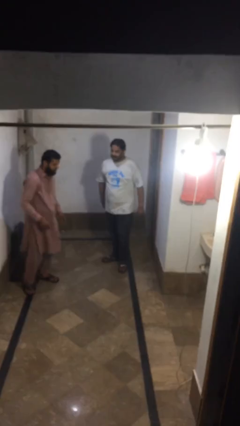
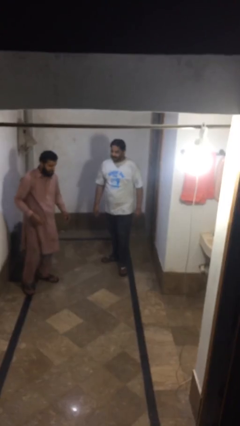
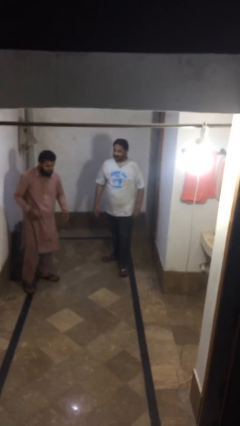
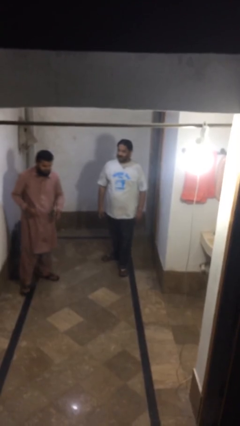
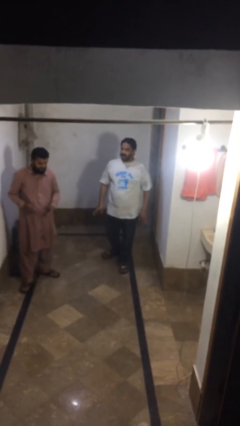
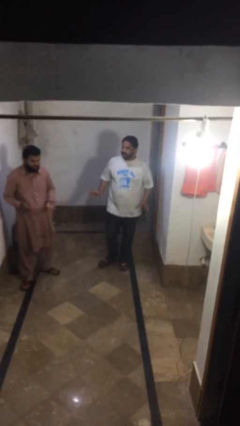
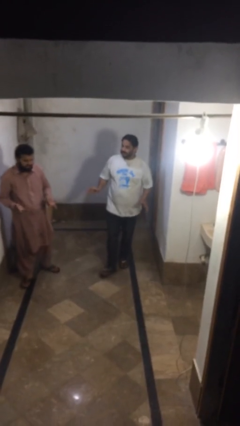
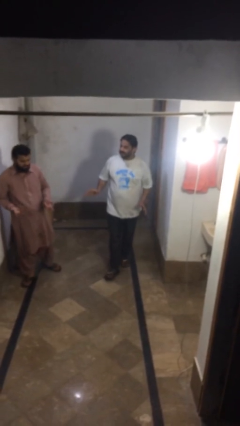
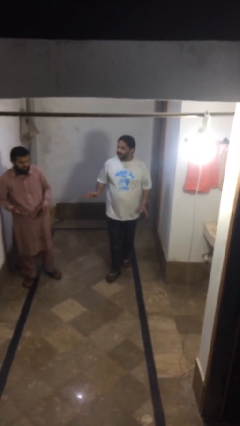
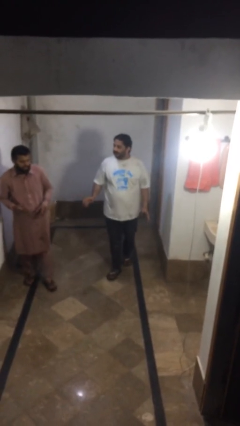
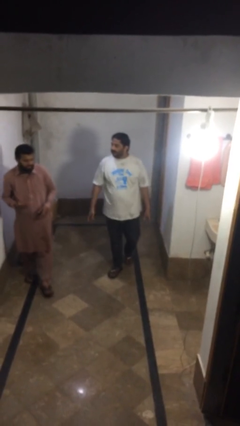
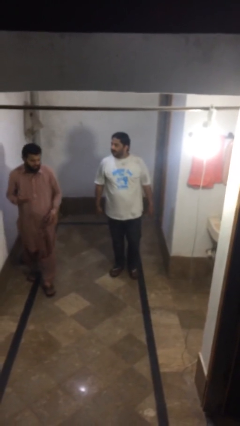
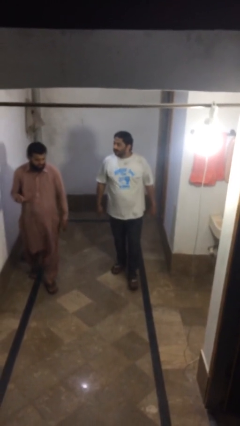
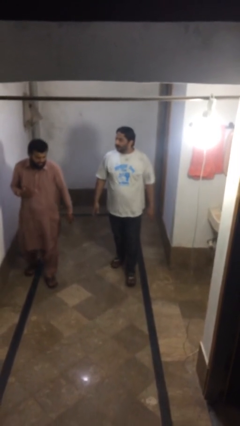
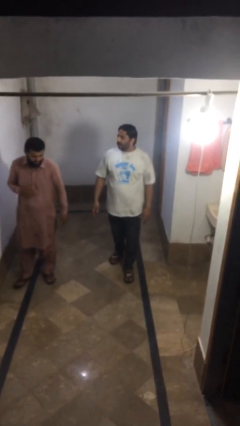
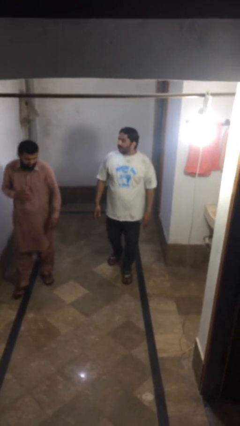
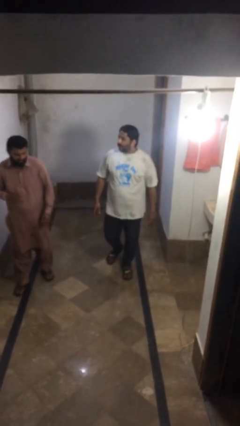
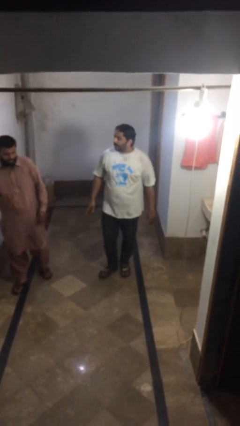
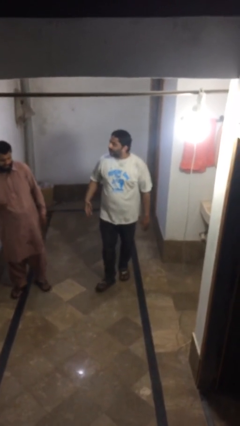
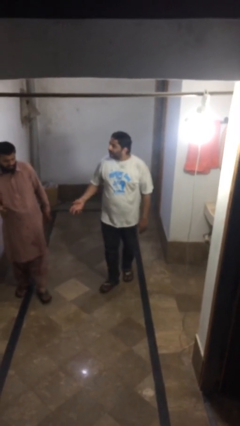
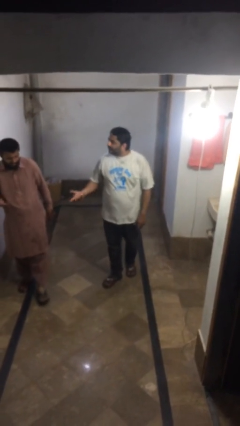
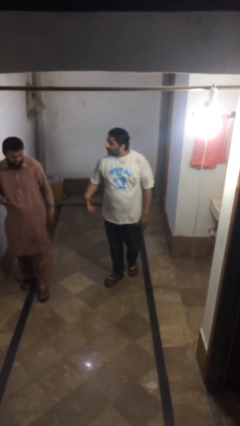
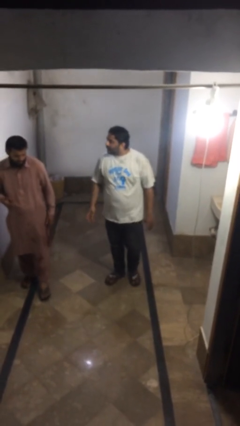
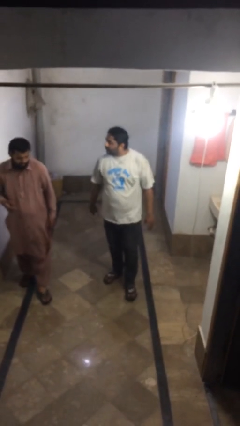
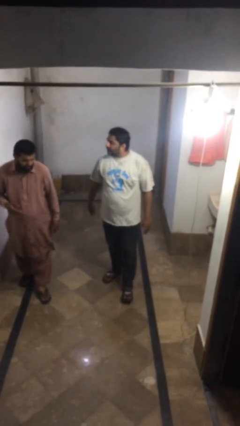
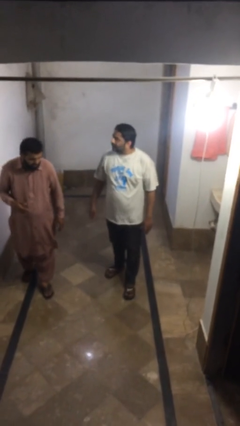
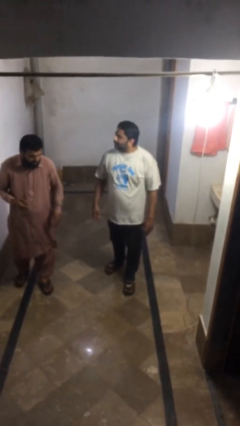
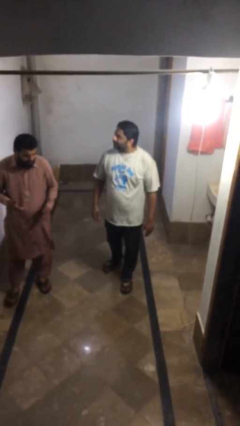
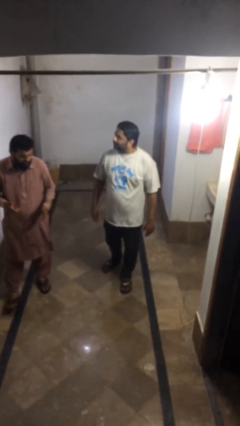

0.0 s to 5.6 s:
person talks to person

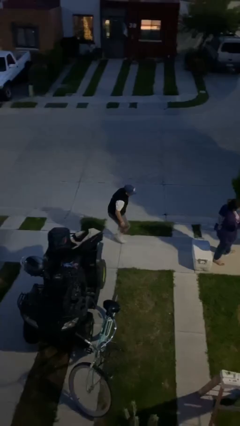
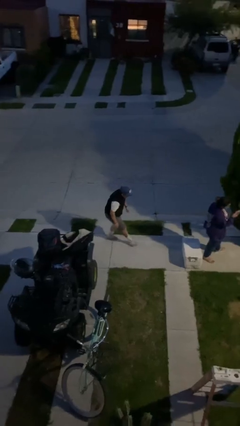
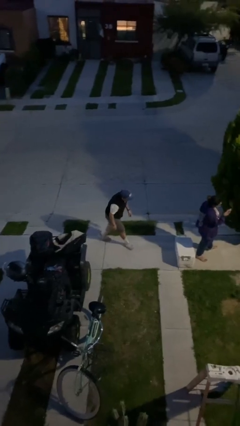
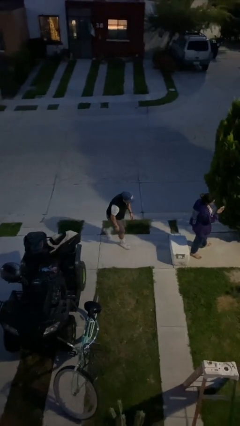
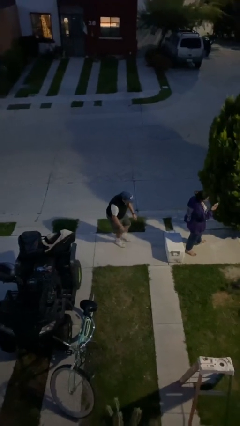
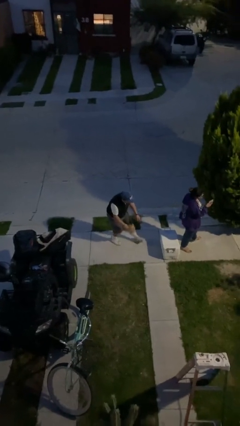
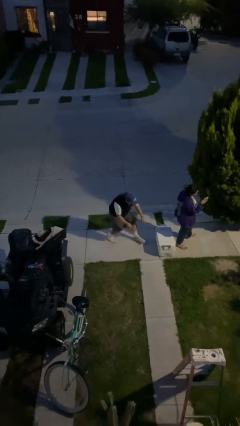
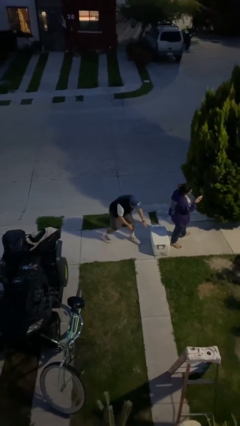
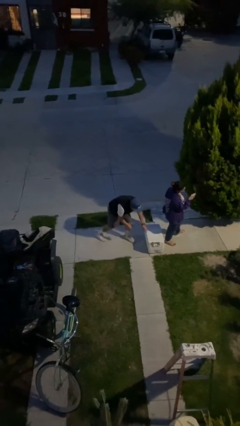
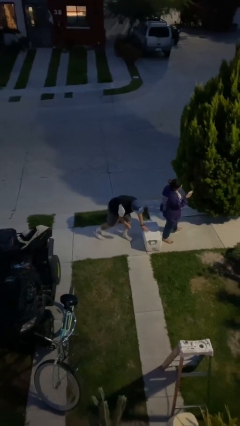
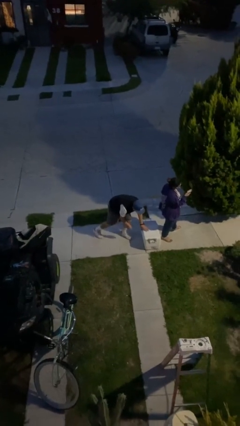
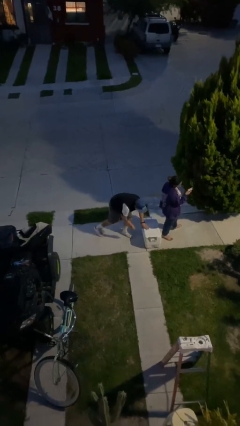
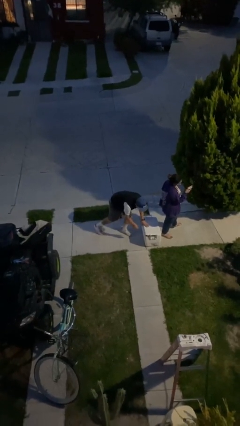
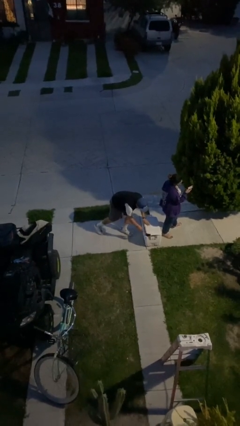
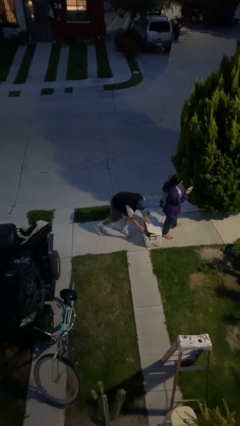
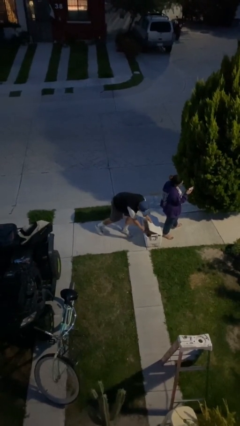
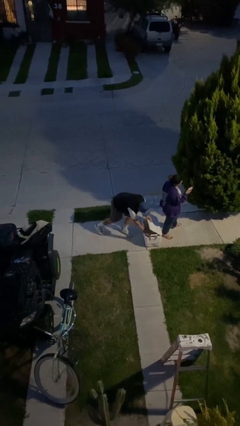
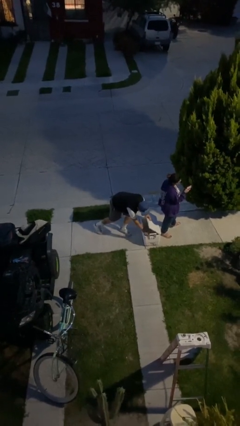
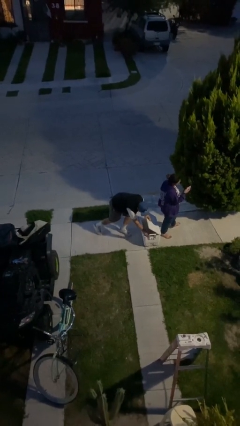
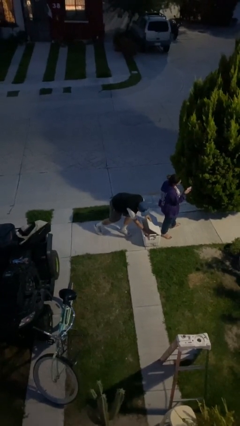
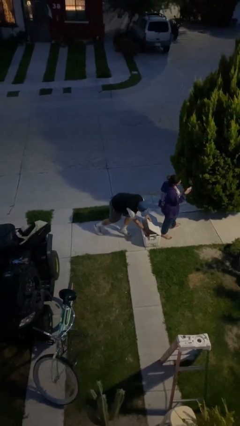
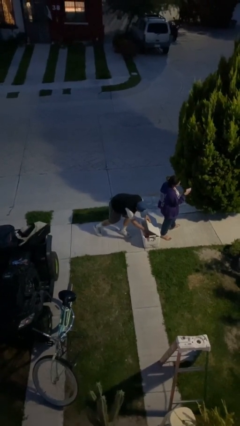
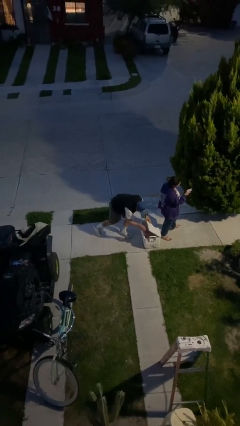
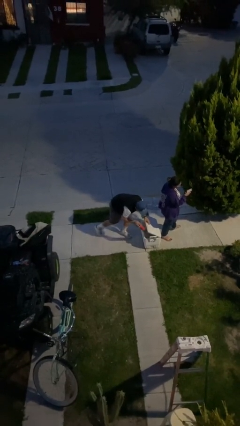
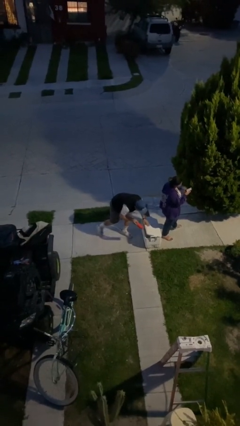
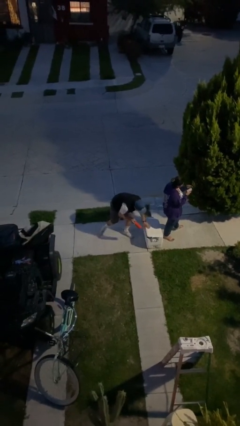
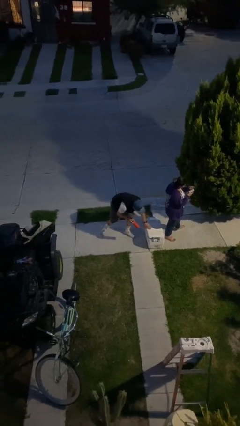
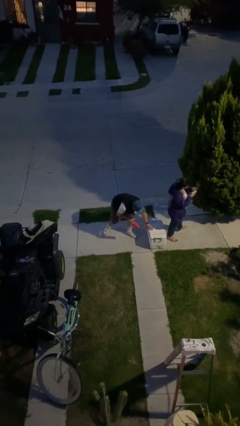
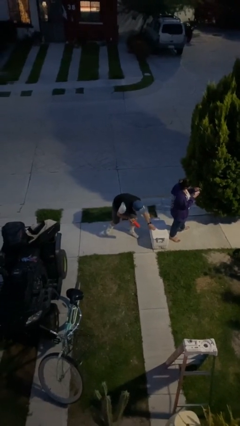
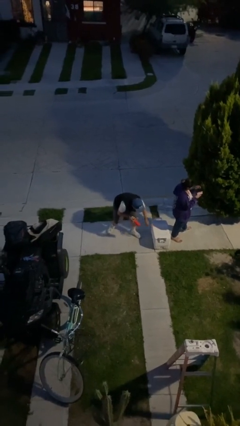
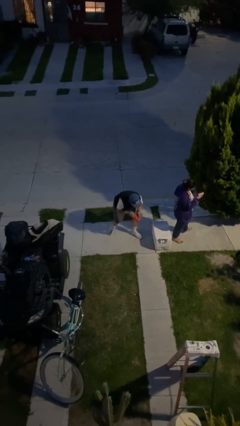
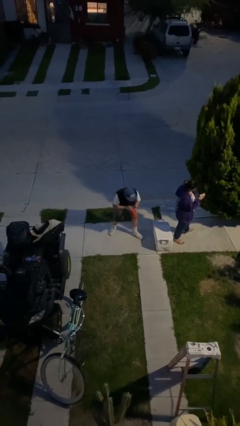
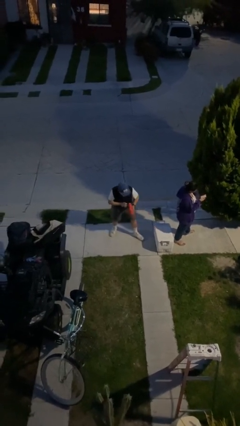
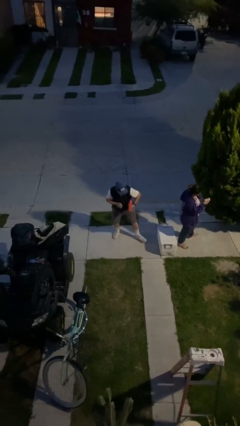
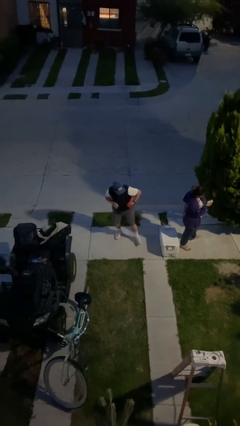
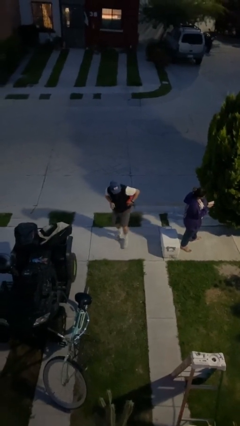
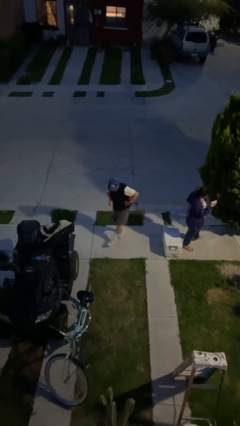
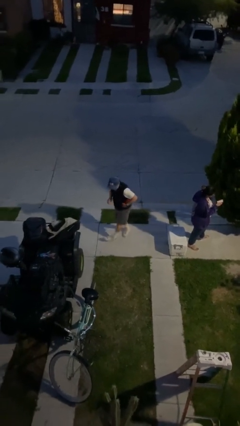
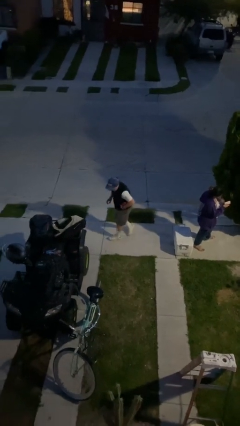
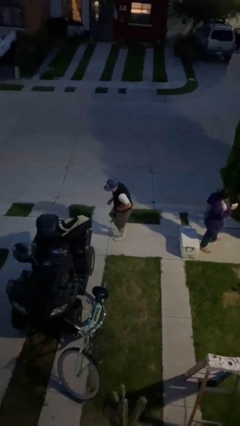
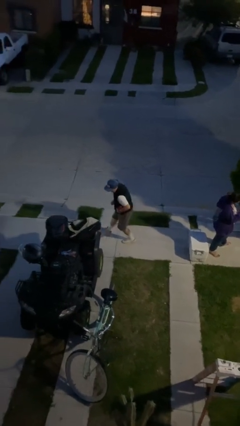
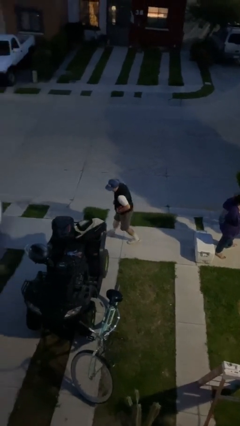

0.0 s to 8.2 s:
person steals object from person

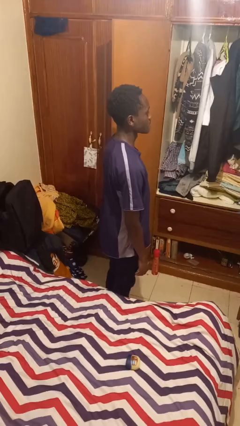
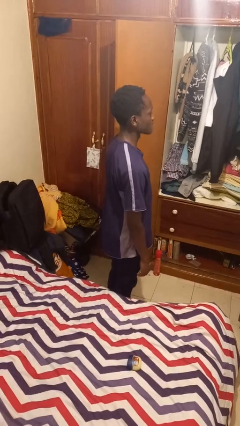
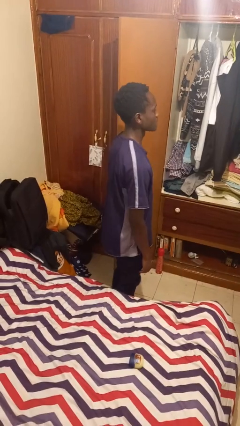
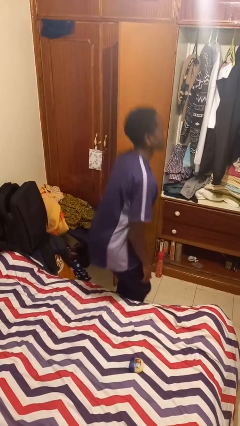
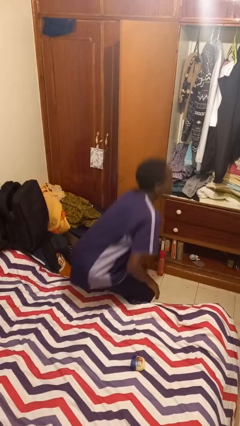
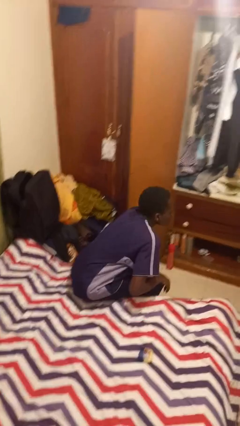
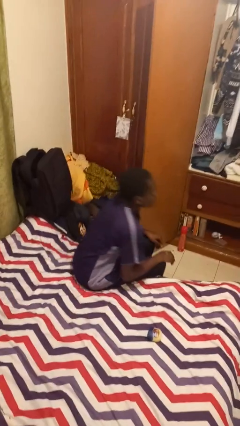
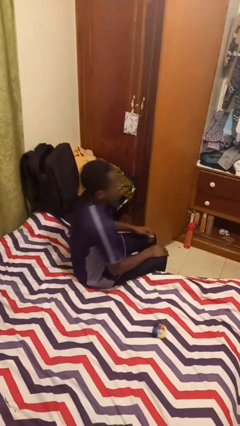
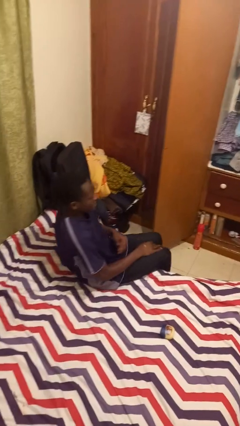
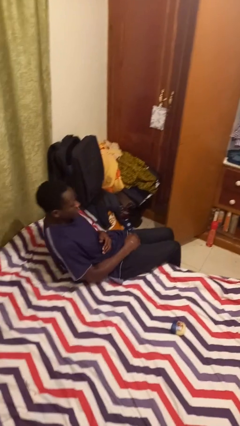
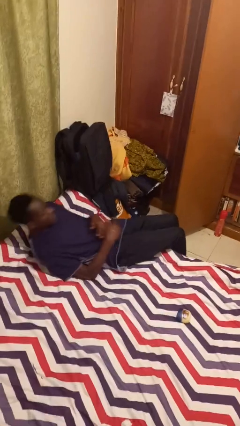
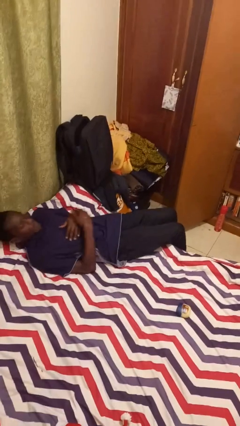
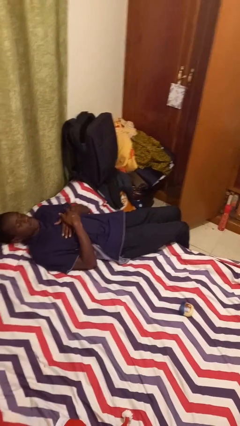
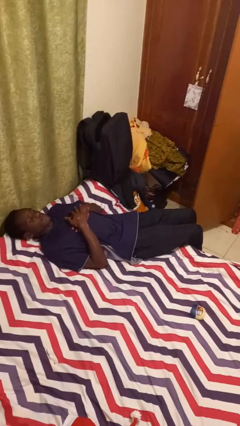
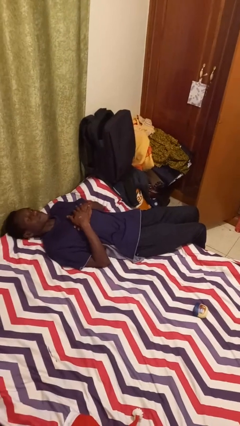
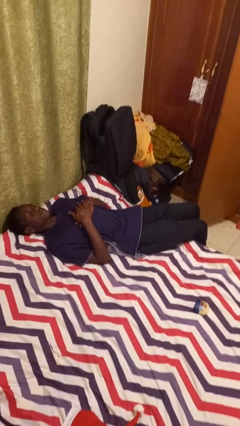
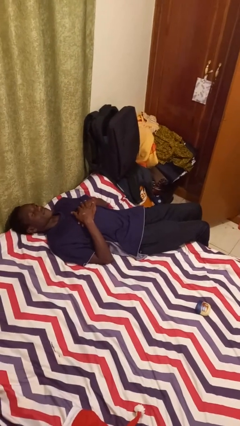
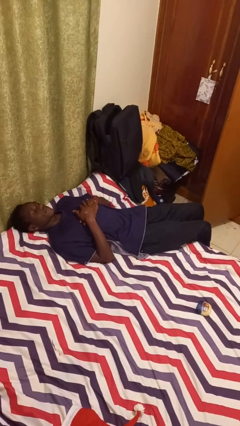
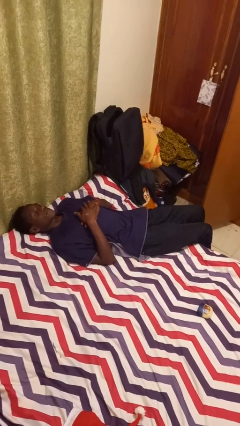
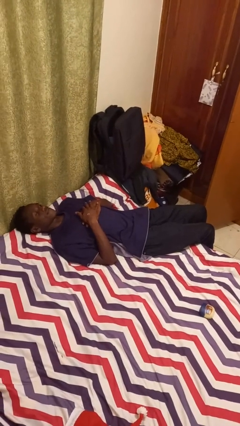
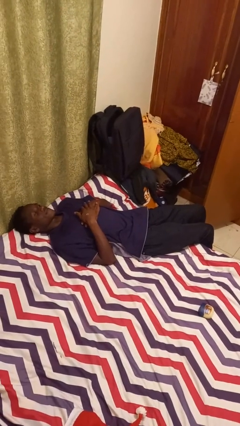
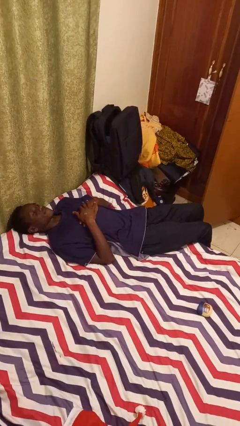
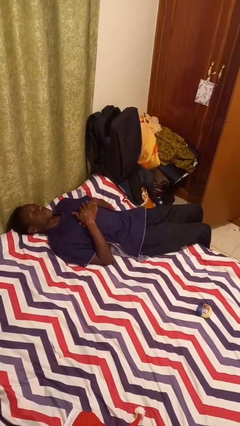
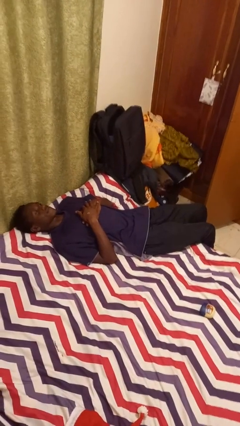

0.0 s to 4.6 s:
person lies down on bed
